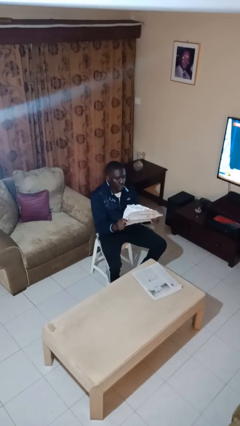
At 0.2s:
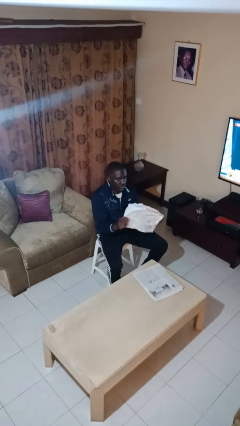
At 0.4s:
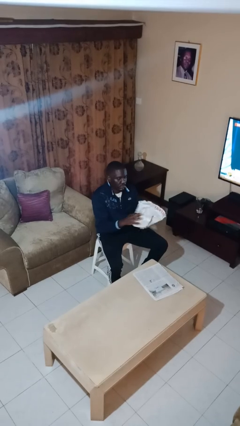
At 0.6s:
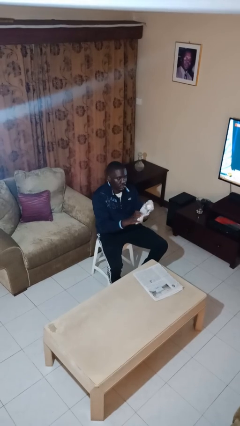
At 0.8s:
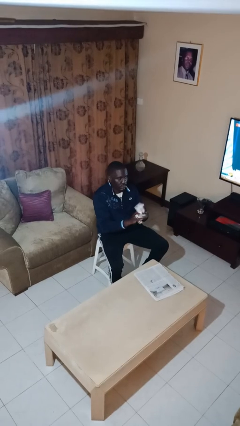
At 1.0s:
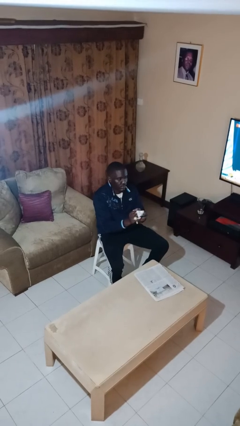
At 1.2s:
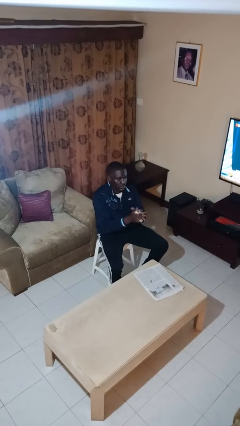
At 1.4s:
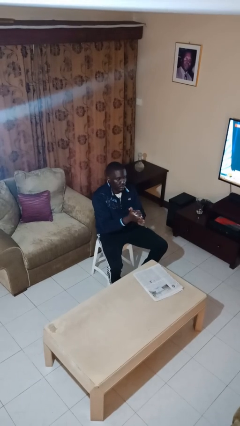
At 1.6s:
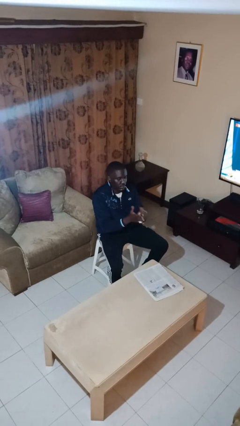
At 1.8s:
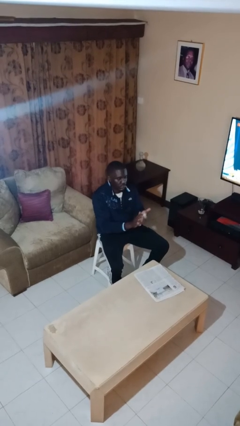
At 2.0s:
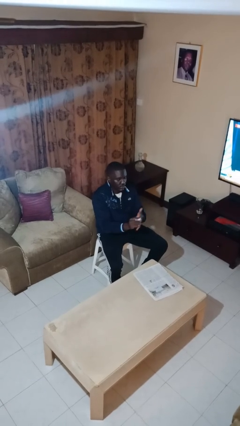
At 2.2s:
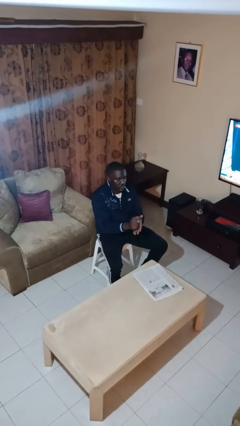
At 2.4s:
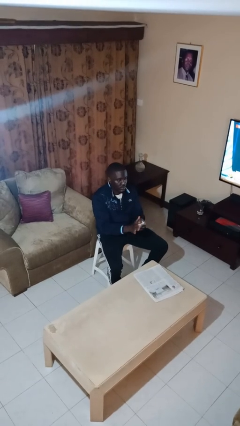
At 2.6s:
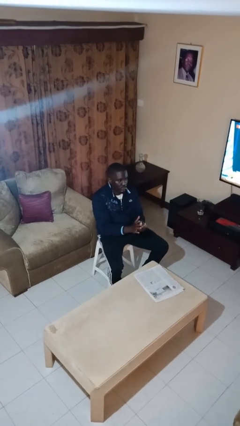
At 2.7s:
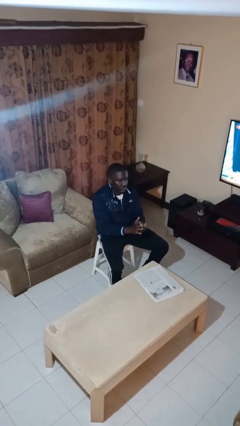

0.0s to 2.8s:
person crumples paper

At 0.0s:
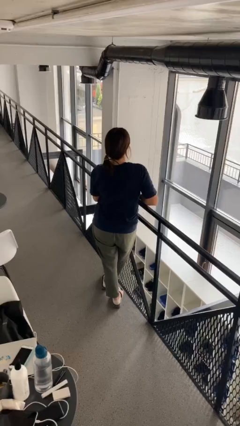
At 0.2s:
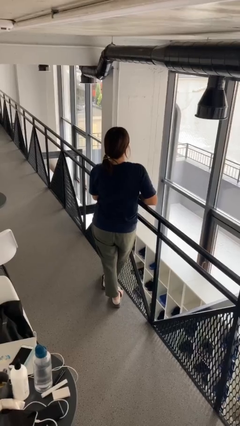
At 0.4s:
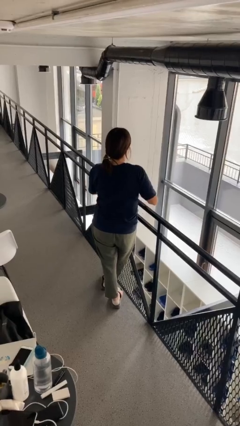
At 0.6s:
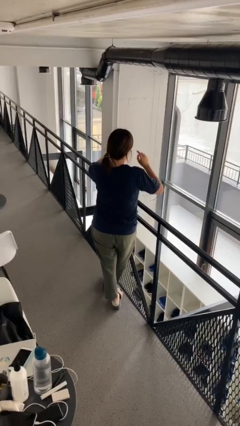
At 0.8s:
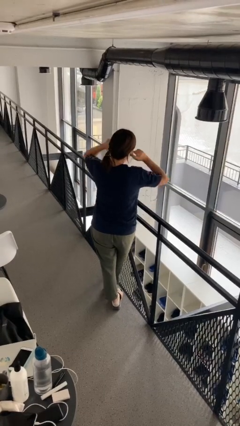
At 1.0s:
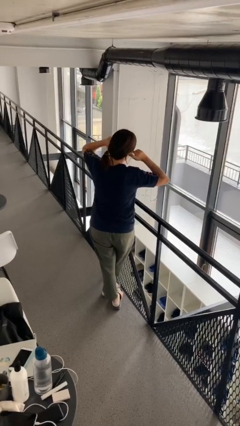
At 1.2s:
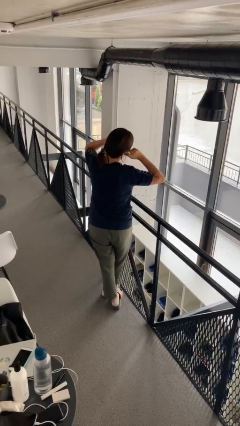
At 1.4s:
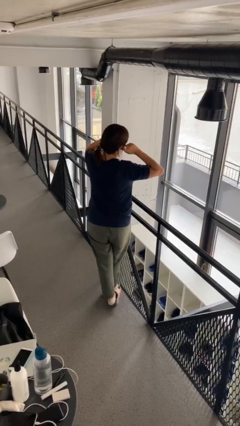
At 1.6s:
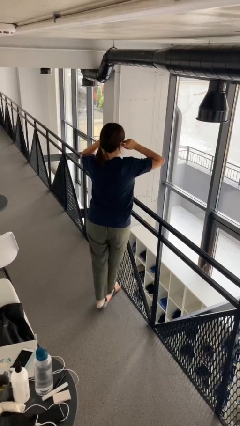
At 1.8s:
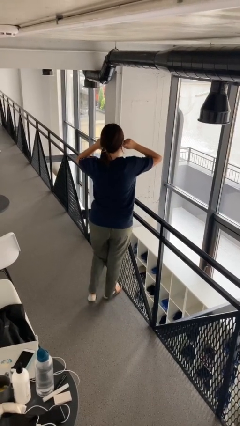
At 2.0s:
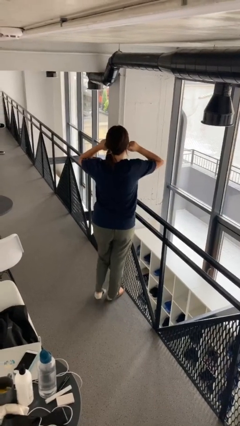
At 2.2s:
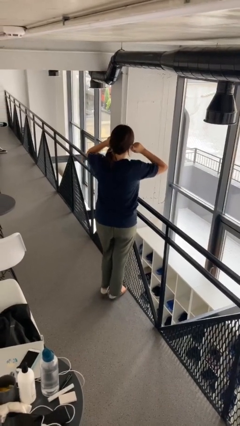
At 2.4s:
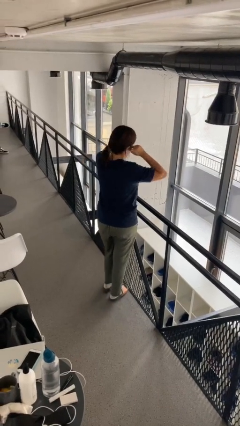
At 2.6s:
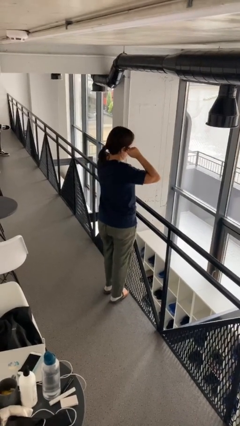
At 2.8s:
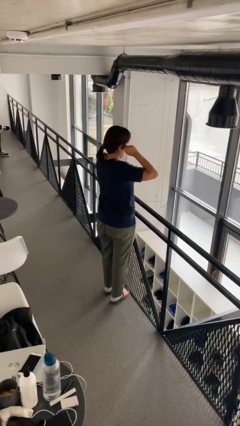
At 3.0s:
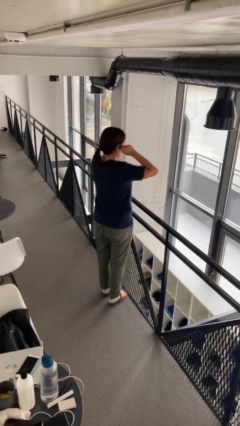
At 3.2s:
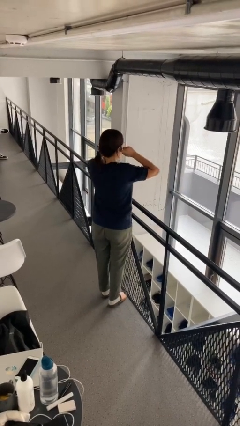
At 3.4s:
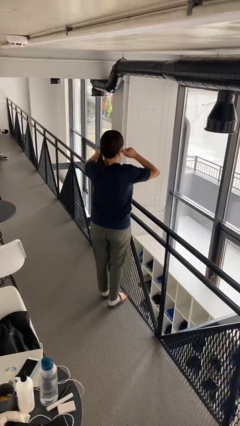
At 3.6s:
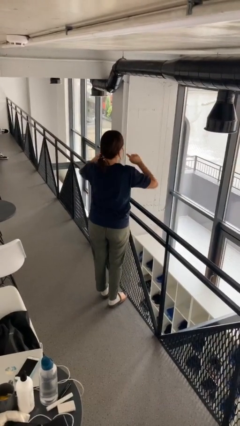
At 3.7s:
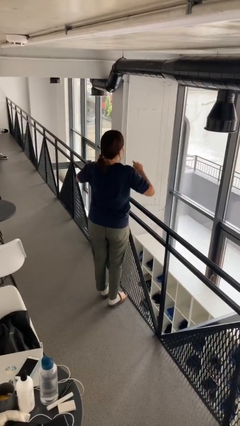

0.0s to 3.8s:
person puts fingers in ear

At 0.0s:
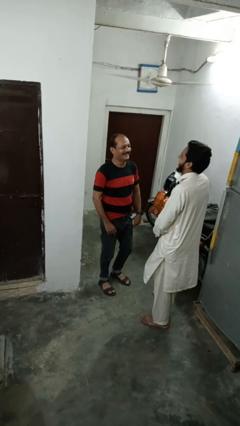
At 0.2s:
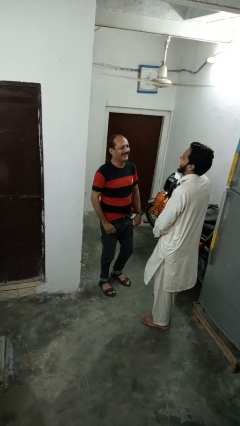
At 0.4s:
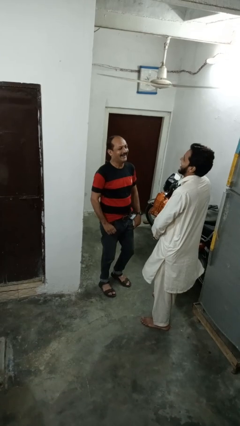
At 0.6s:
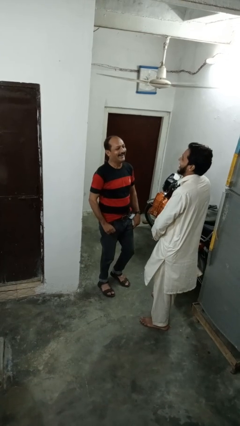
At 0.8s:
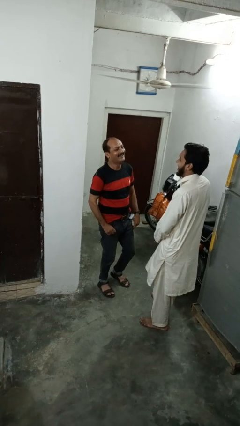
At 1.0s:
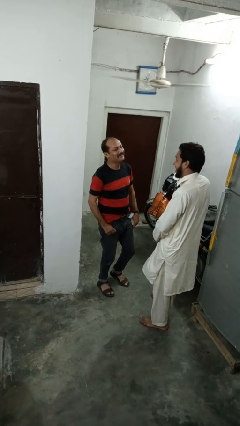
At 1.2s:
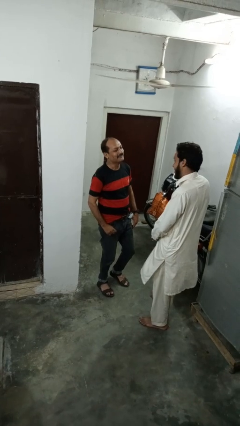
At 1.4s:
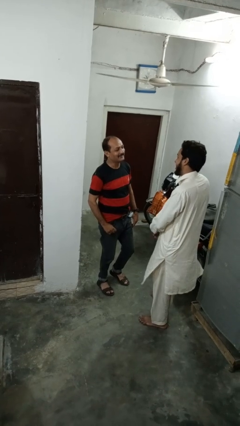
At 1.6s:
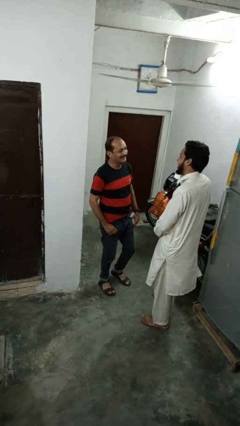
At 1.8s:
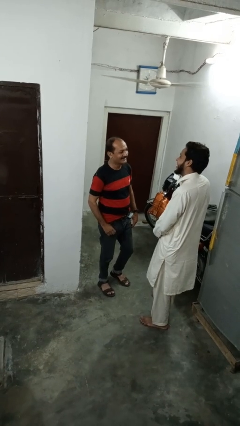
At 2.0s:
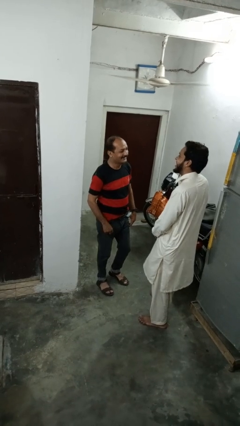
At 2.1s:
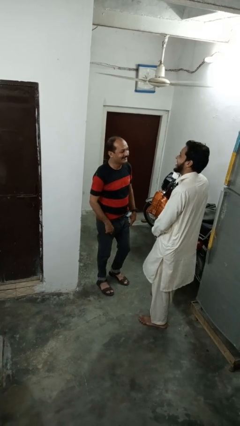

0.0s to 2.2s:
person laughs with person

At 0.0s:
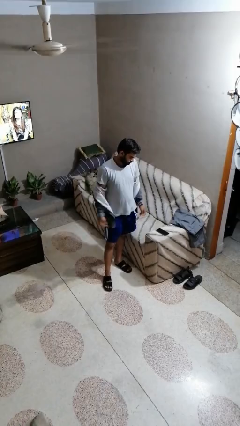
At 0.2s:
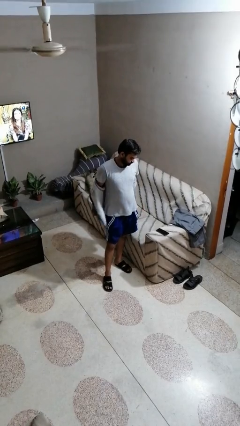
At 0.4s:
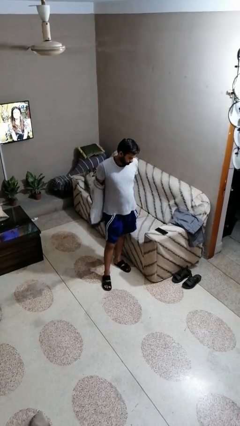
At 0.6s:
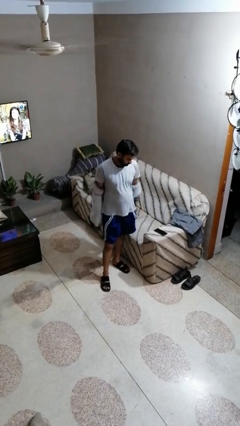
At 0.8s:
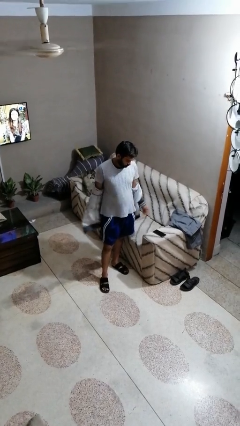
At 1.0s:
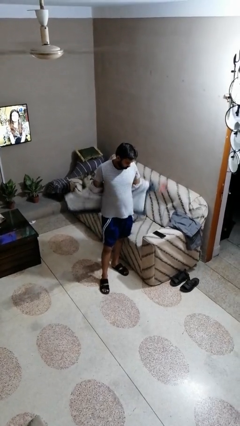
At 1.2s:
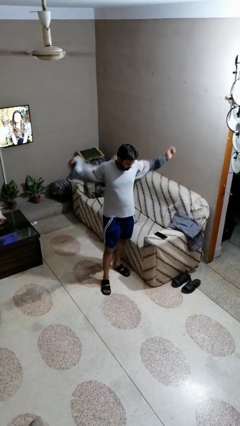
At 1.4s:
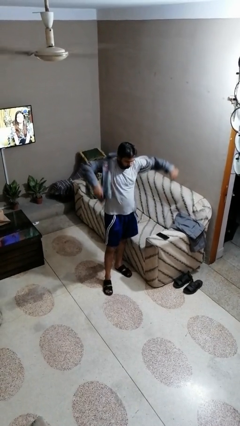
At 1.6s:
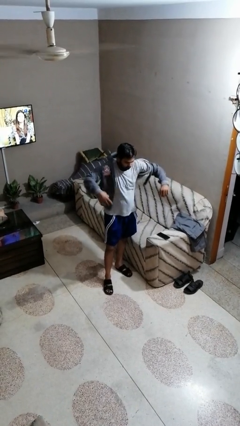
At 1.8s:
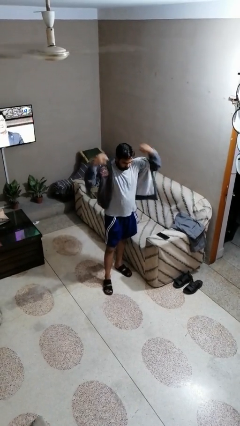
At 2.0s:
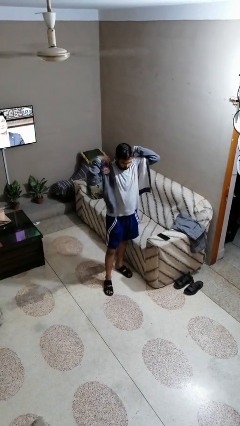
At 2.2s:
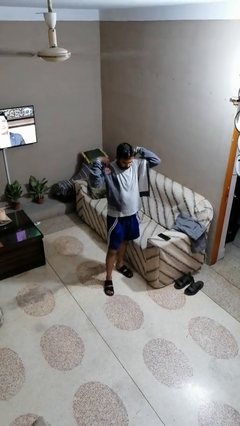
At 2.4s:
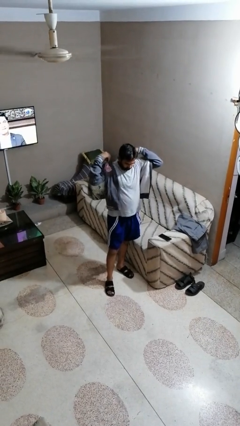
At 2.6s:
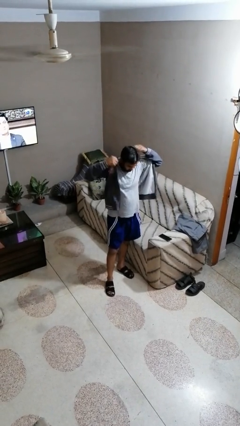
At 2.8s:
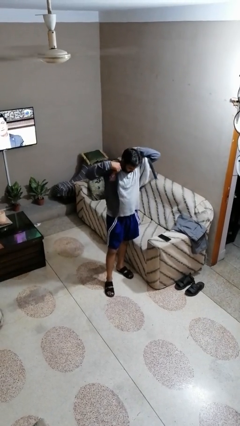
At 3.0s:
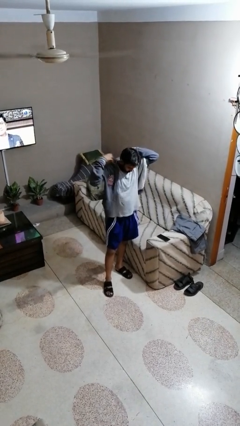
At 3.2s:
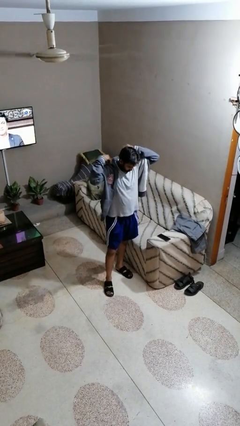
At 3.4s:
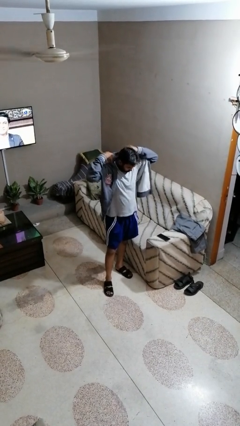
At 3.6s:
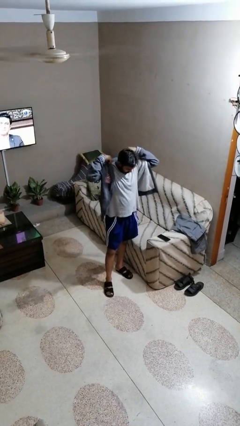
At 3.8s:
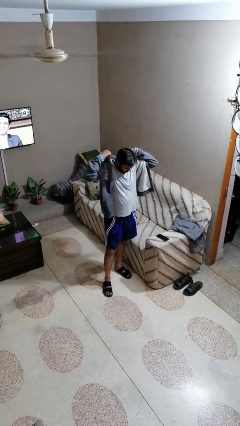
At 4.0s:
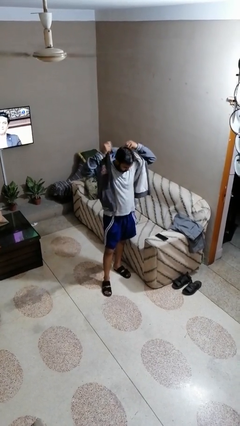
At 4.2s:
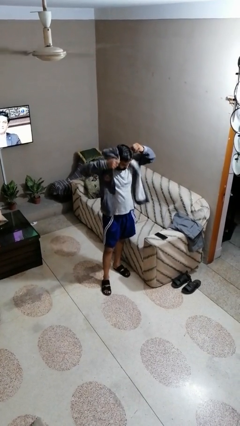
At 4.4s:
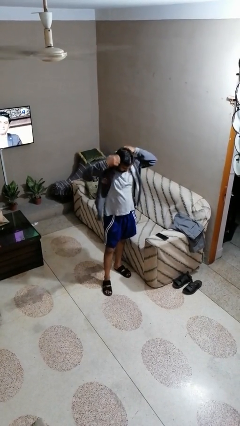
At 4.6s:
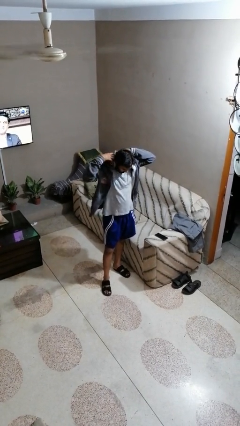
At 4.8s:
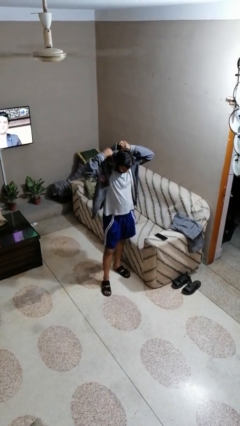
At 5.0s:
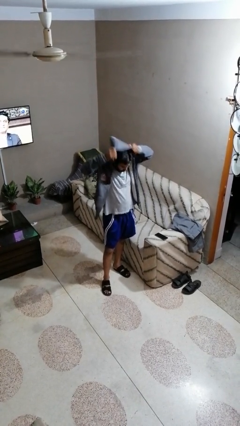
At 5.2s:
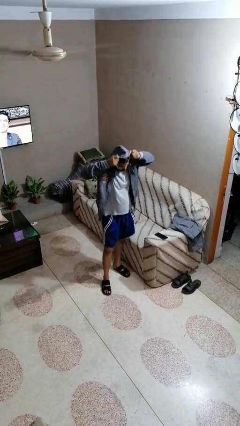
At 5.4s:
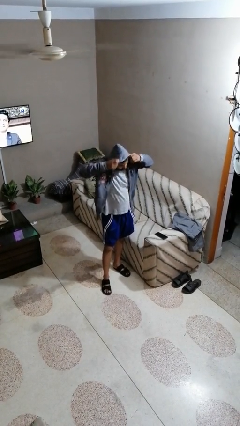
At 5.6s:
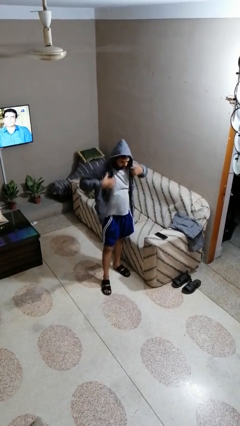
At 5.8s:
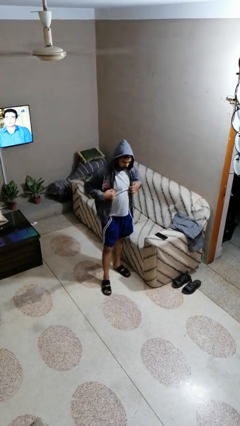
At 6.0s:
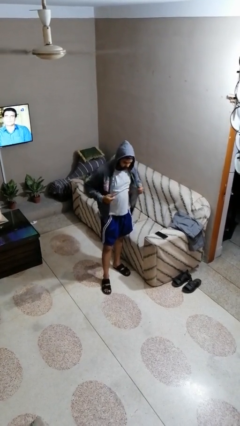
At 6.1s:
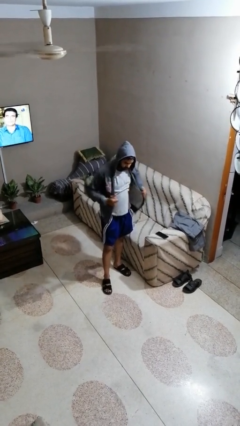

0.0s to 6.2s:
person puts on hoodie

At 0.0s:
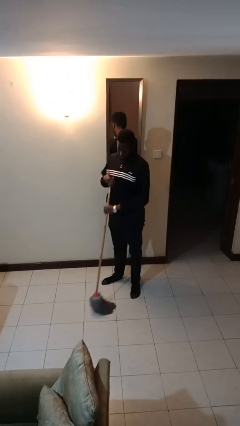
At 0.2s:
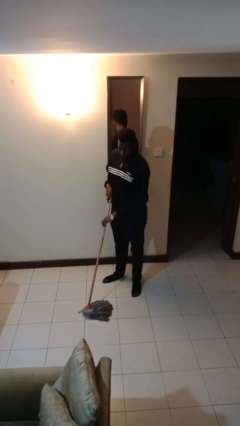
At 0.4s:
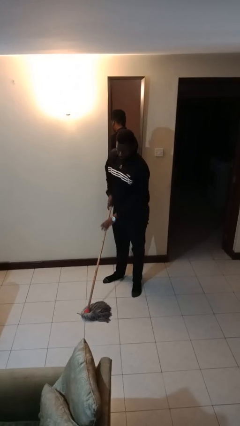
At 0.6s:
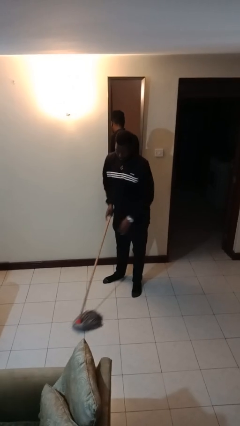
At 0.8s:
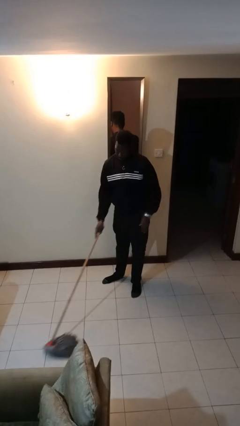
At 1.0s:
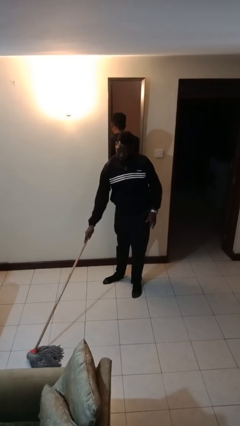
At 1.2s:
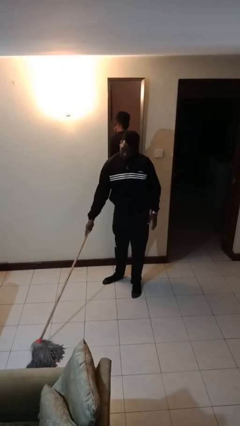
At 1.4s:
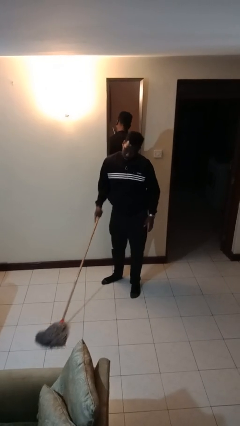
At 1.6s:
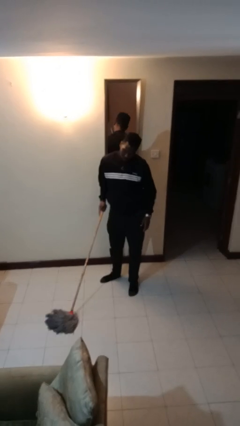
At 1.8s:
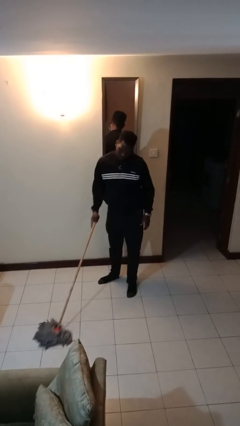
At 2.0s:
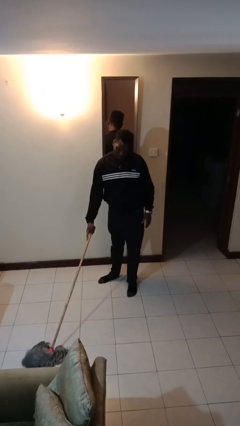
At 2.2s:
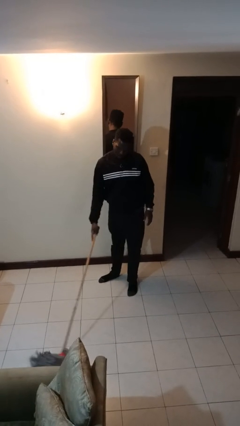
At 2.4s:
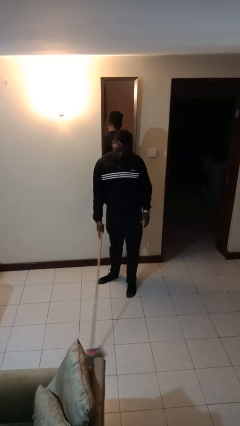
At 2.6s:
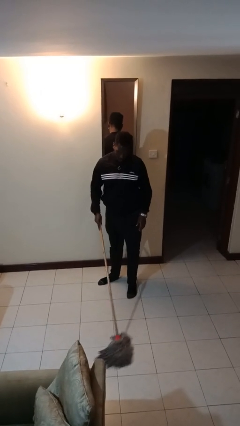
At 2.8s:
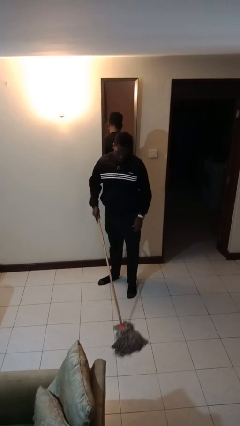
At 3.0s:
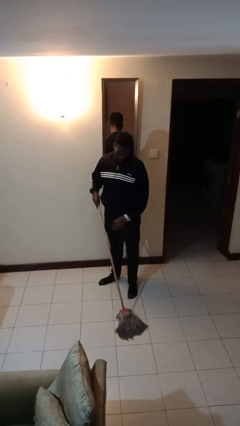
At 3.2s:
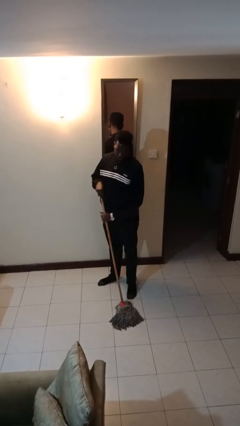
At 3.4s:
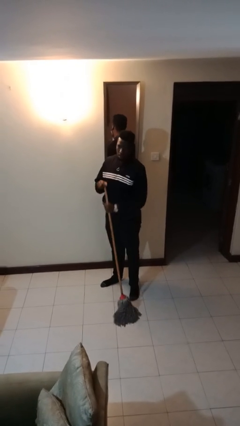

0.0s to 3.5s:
person mops
